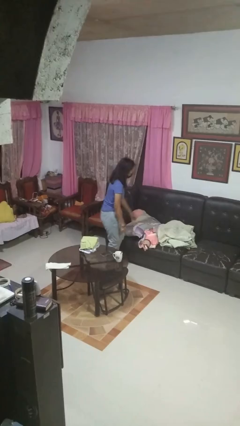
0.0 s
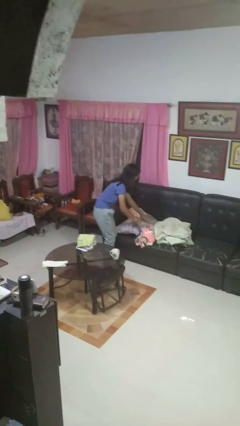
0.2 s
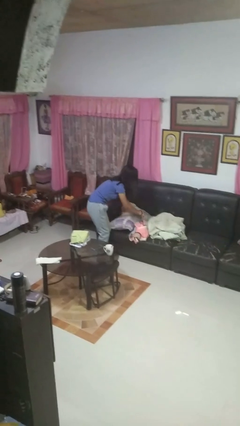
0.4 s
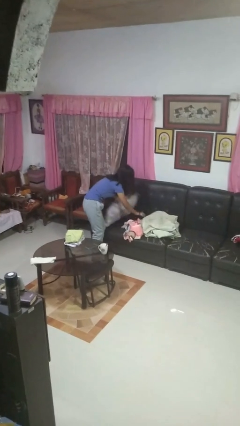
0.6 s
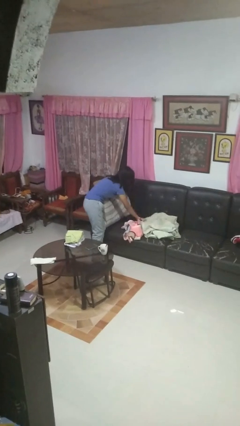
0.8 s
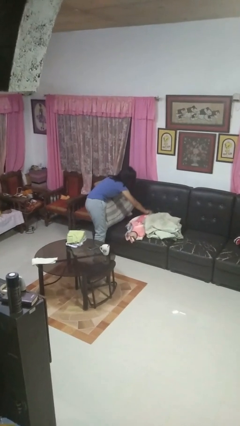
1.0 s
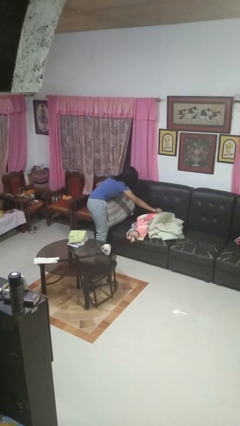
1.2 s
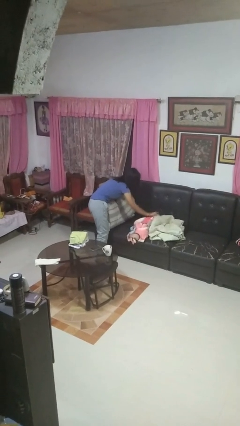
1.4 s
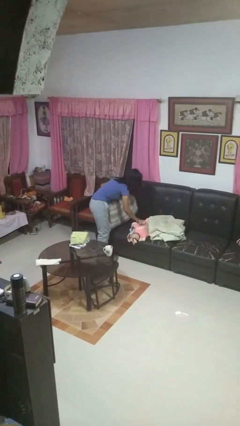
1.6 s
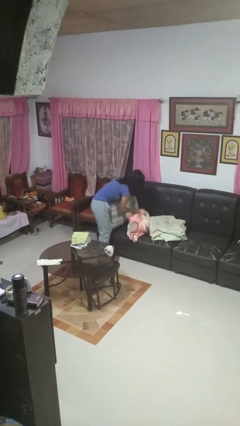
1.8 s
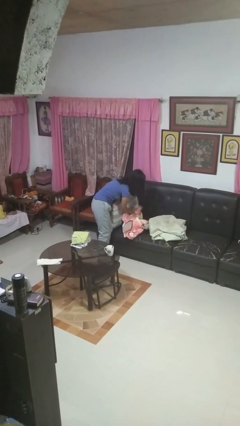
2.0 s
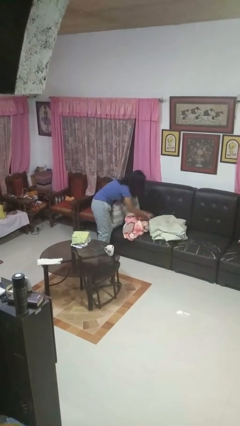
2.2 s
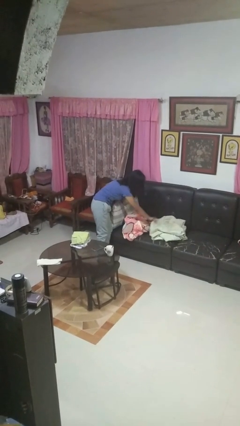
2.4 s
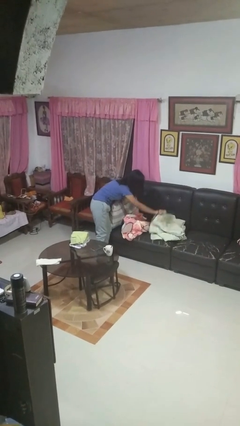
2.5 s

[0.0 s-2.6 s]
person searches in couch

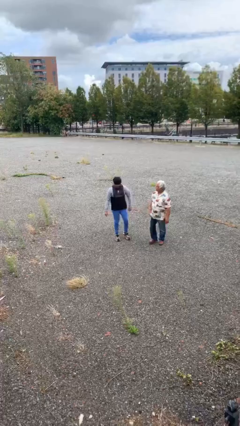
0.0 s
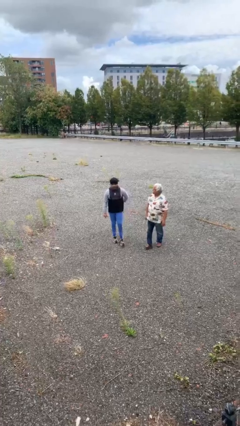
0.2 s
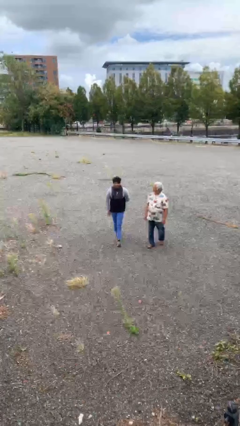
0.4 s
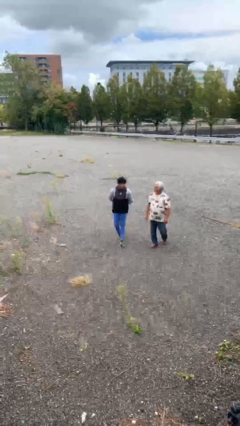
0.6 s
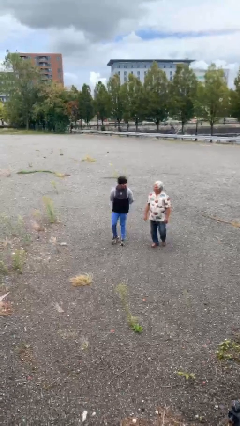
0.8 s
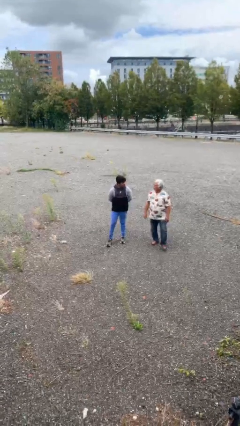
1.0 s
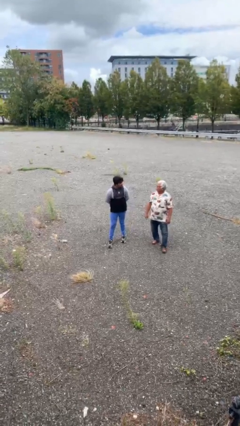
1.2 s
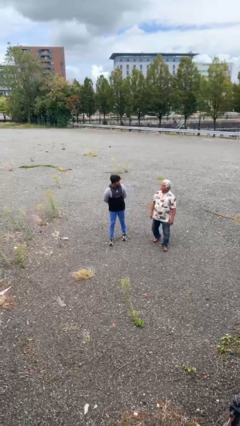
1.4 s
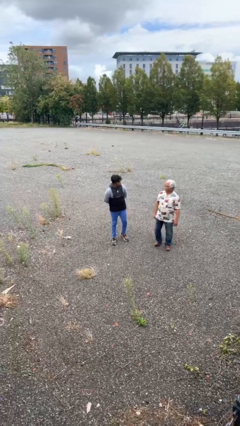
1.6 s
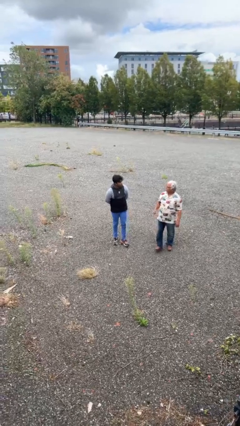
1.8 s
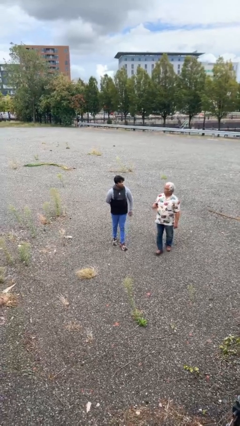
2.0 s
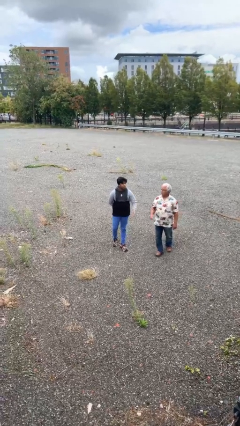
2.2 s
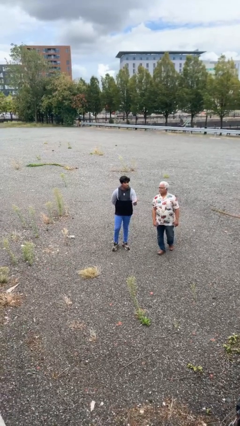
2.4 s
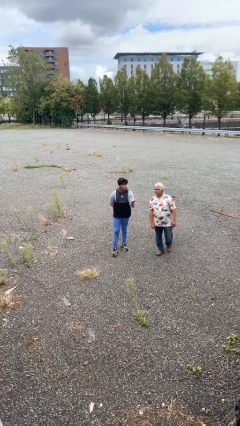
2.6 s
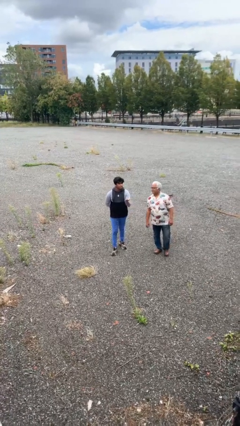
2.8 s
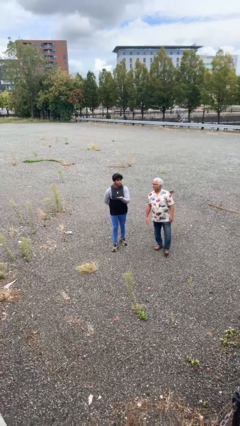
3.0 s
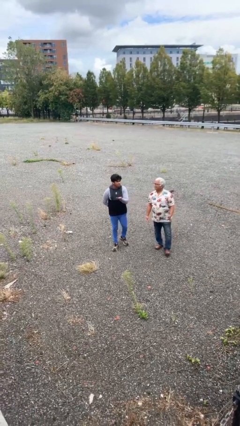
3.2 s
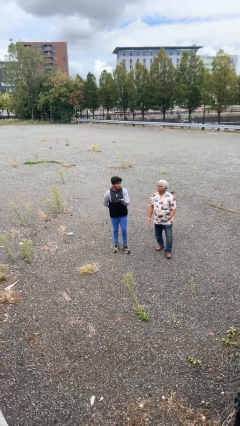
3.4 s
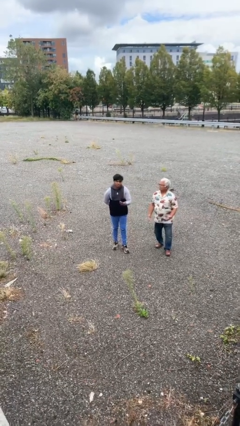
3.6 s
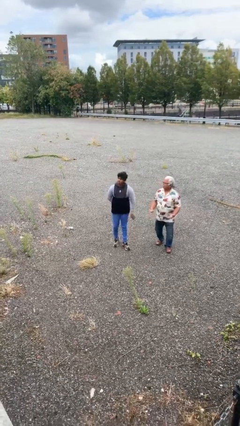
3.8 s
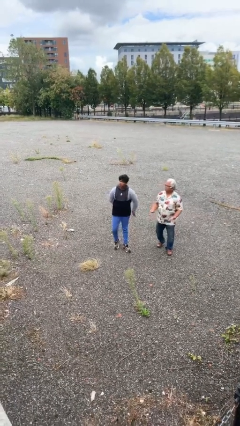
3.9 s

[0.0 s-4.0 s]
person talks to person

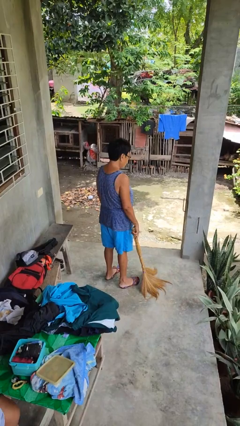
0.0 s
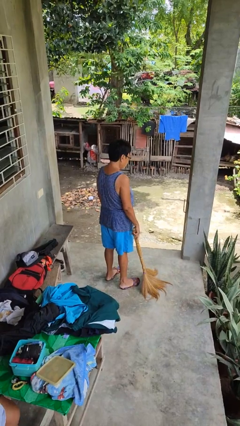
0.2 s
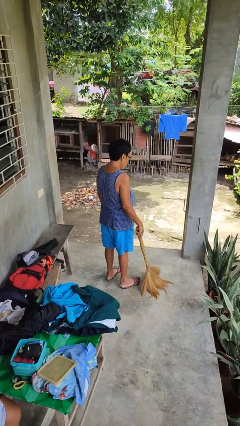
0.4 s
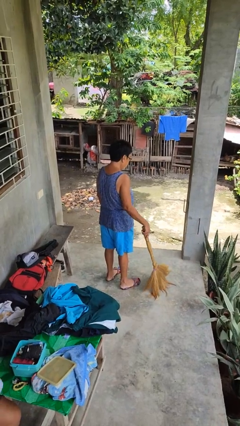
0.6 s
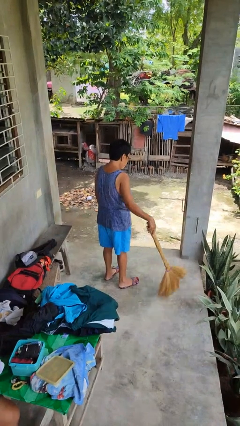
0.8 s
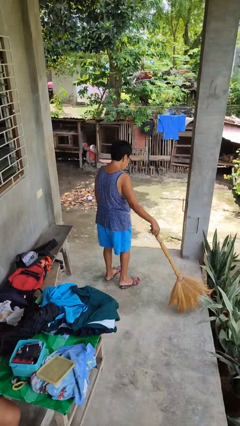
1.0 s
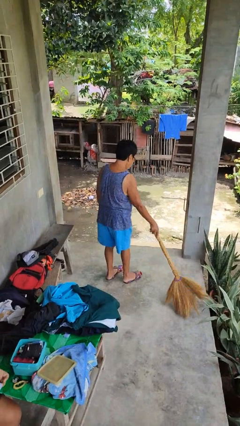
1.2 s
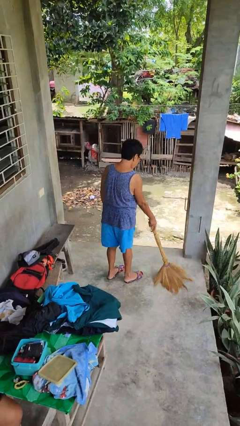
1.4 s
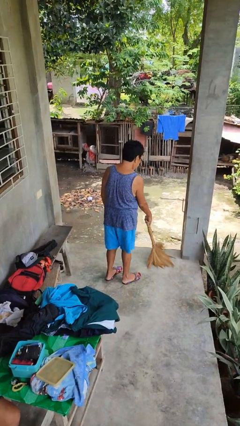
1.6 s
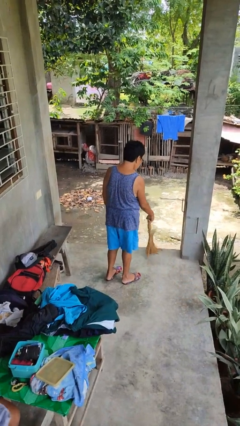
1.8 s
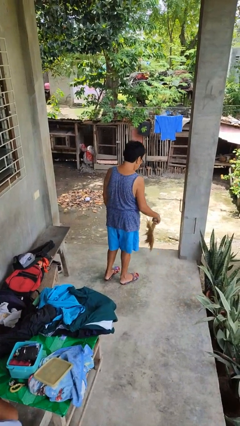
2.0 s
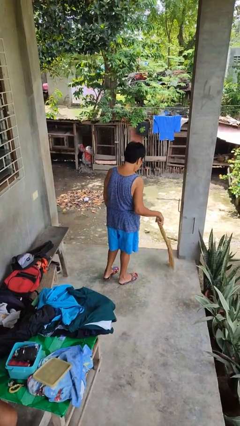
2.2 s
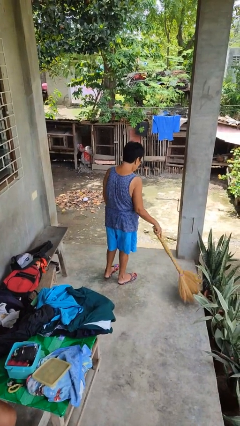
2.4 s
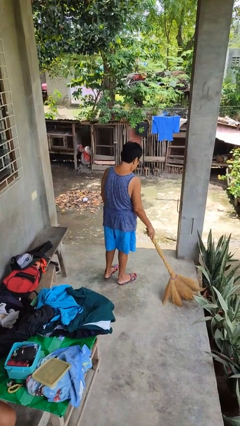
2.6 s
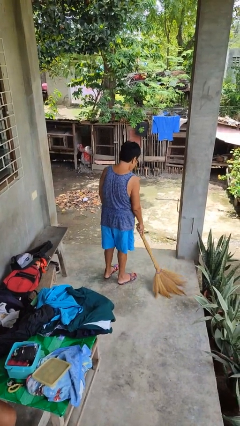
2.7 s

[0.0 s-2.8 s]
person sweeps floor

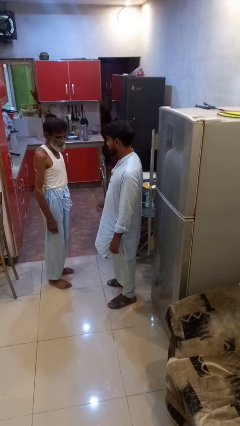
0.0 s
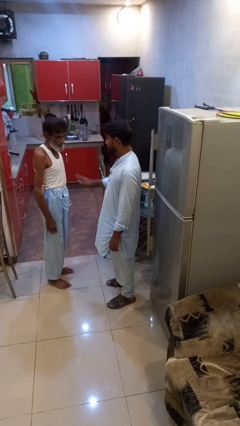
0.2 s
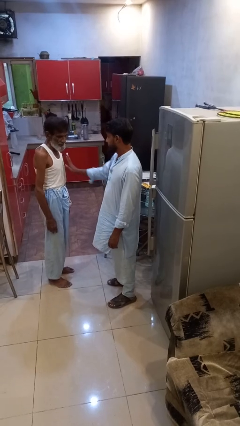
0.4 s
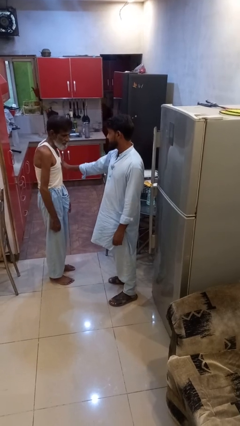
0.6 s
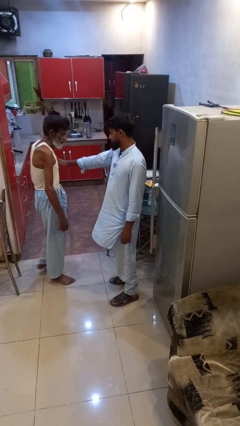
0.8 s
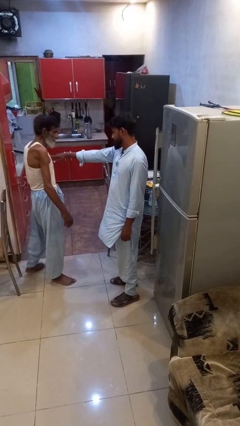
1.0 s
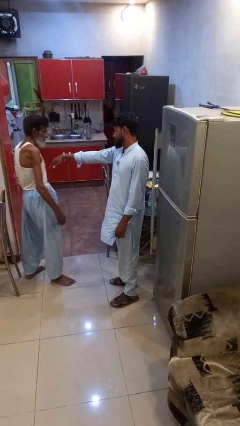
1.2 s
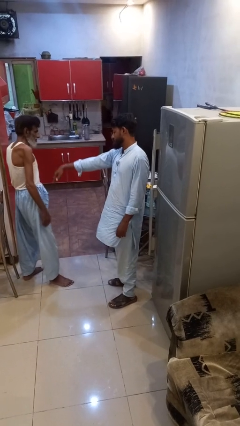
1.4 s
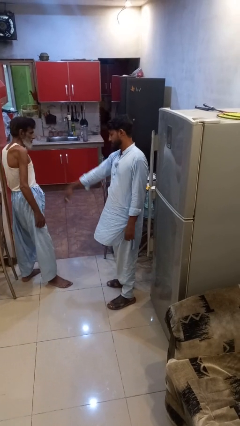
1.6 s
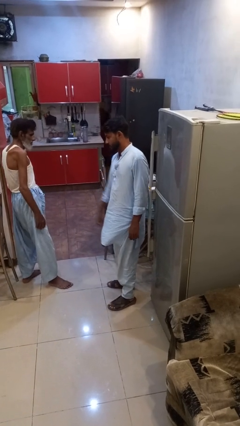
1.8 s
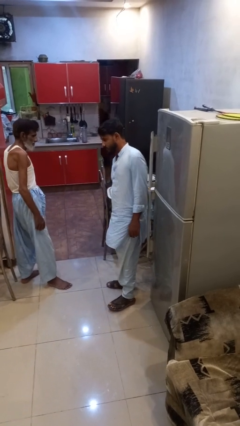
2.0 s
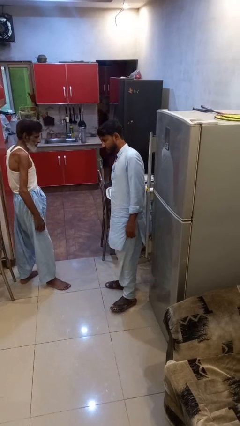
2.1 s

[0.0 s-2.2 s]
person shoves person

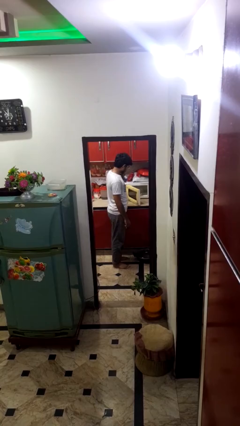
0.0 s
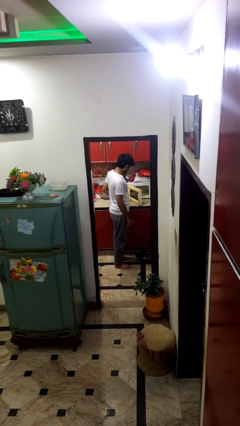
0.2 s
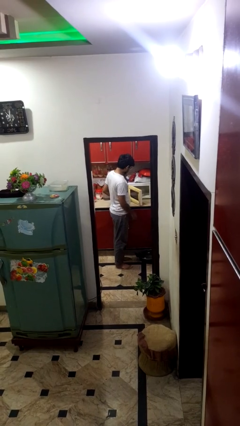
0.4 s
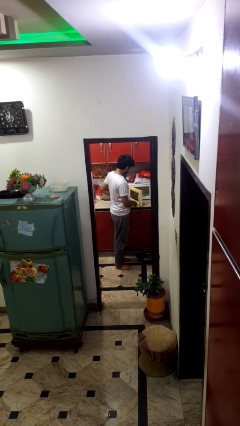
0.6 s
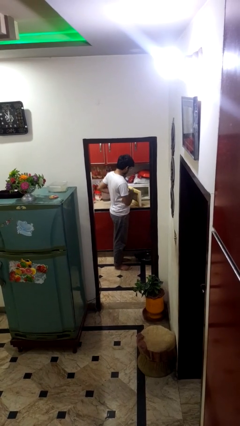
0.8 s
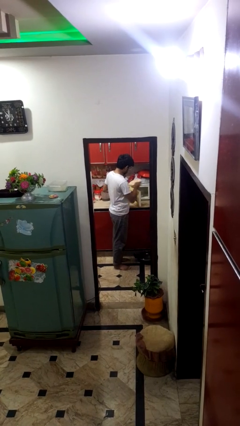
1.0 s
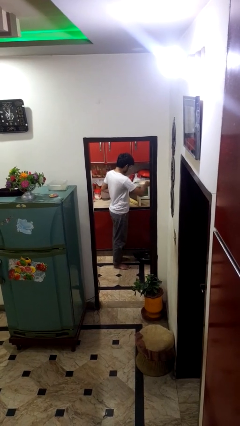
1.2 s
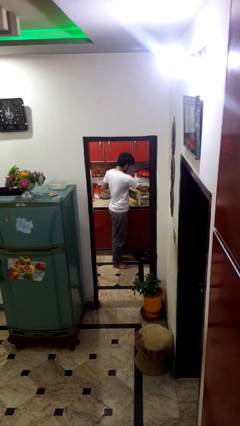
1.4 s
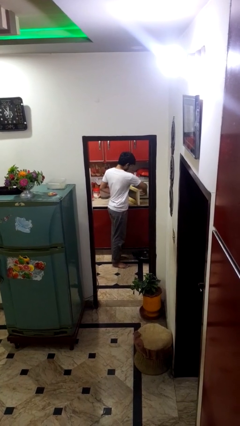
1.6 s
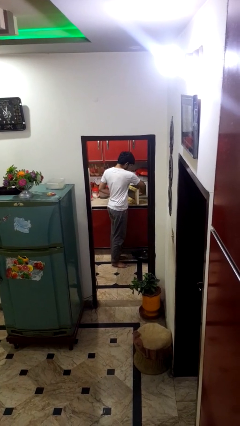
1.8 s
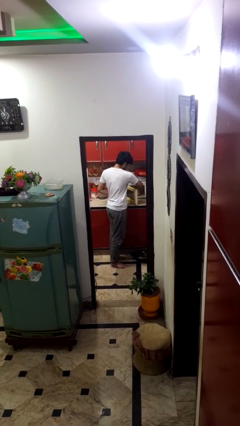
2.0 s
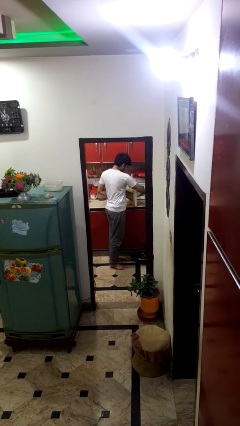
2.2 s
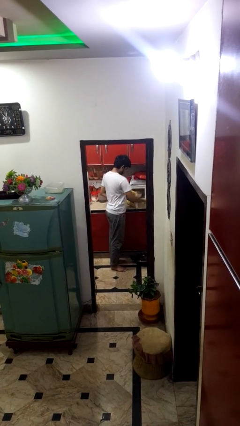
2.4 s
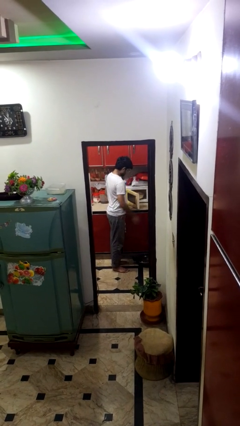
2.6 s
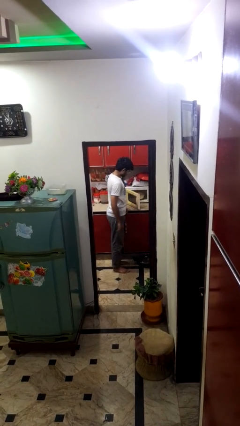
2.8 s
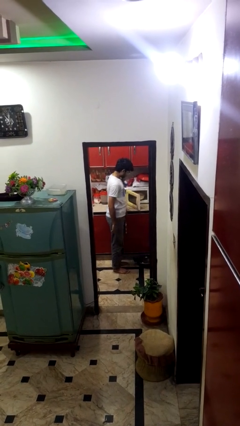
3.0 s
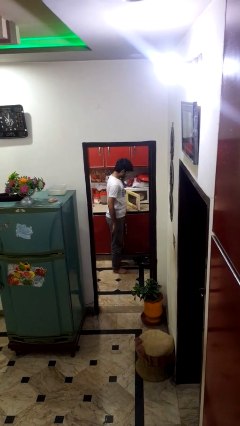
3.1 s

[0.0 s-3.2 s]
person puts object into microwave

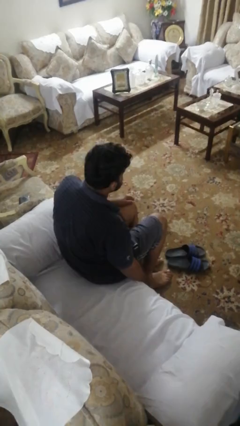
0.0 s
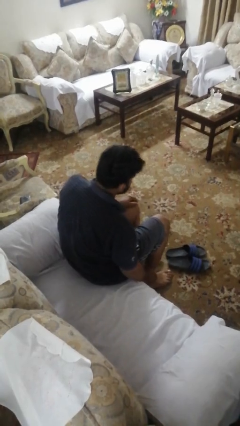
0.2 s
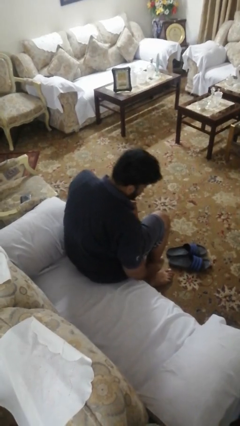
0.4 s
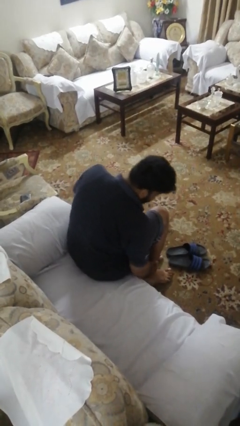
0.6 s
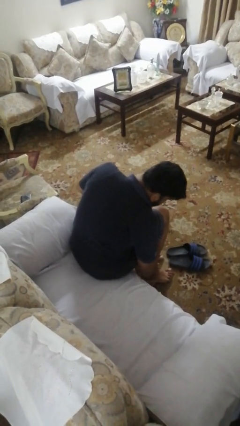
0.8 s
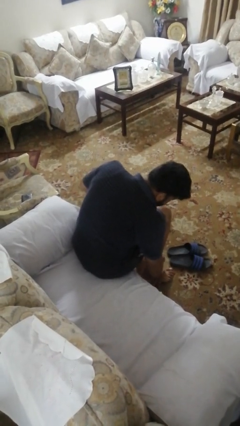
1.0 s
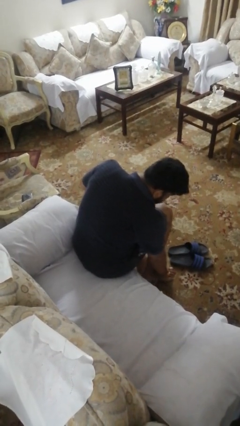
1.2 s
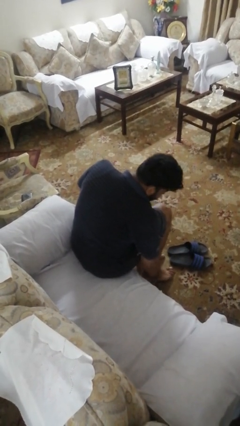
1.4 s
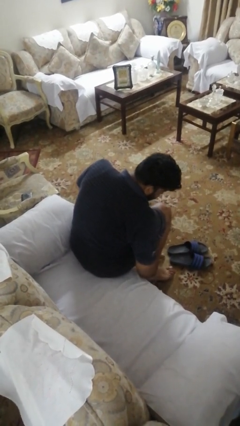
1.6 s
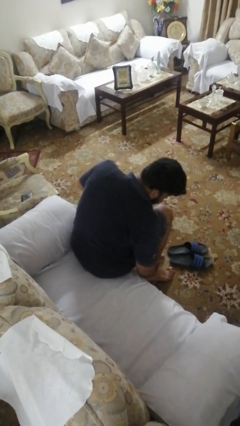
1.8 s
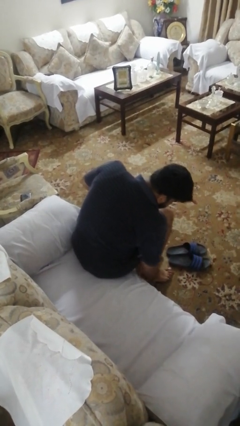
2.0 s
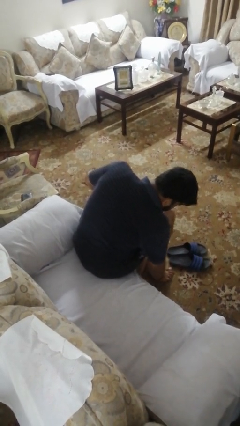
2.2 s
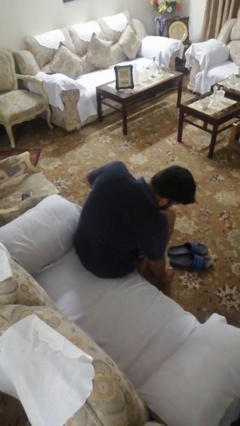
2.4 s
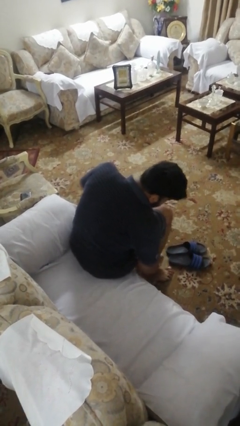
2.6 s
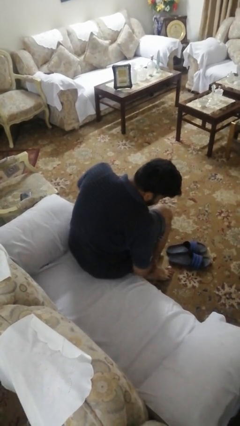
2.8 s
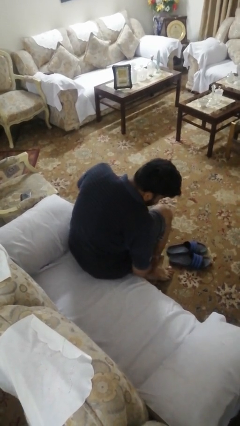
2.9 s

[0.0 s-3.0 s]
person rubs foot
